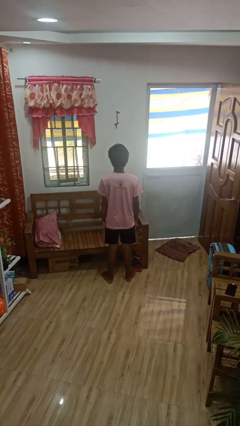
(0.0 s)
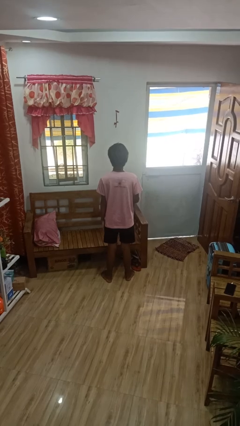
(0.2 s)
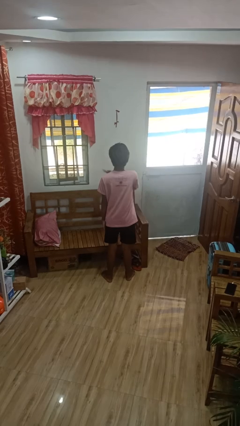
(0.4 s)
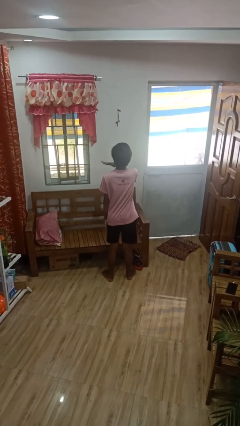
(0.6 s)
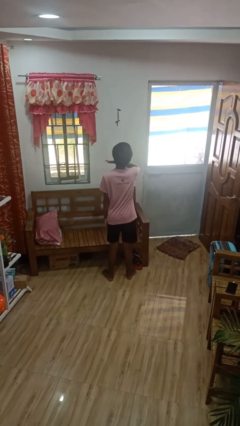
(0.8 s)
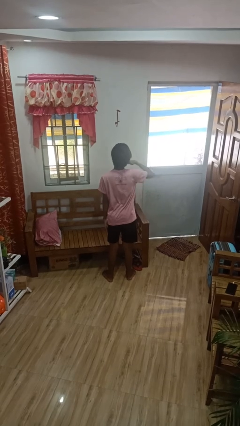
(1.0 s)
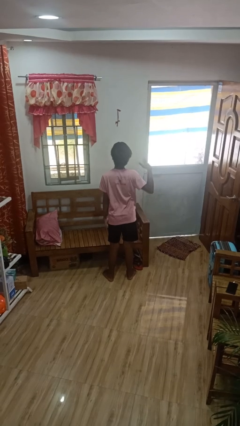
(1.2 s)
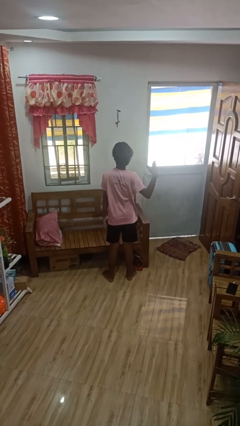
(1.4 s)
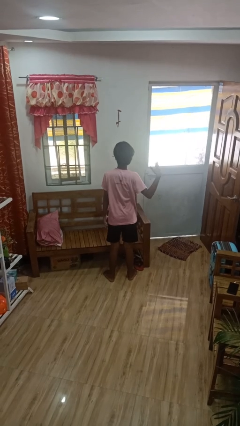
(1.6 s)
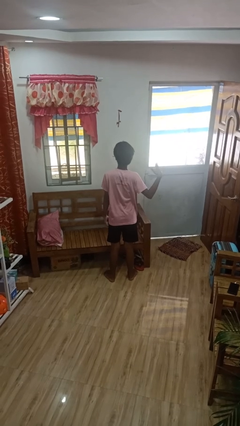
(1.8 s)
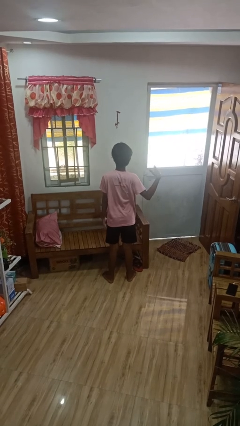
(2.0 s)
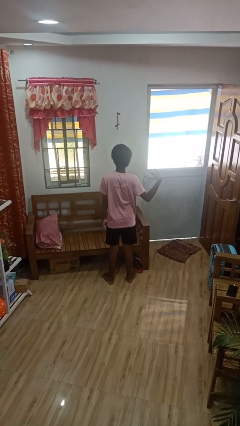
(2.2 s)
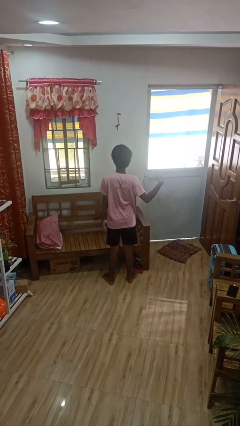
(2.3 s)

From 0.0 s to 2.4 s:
person gestures cut

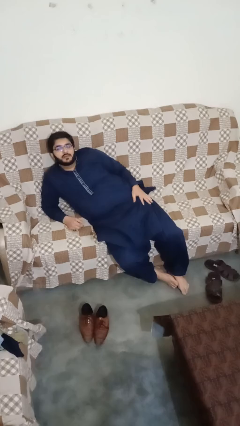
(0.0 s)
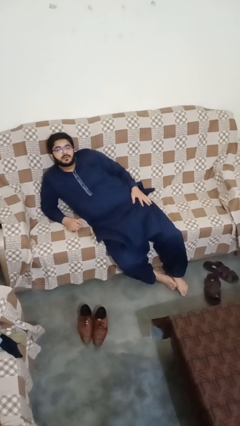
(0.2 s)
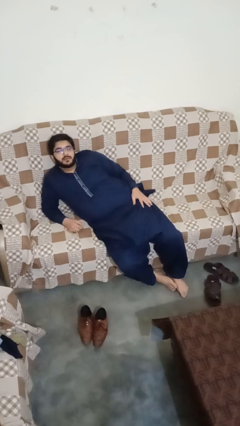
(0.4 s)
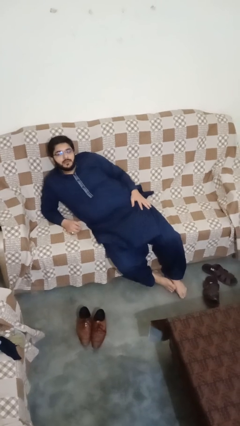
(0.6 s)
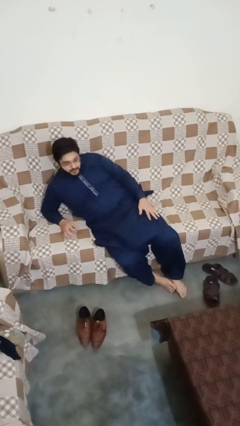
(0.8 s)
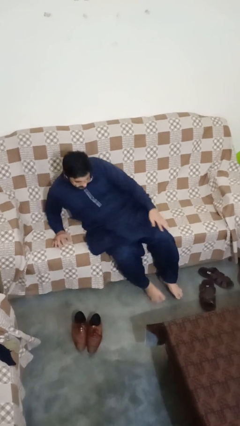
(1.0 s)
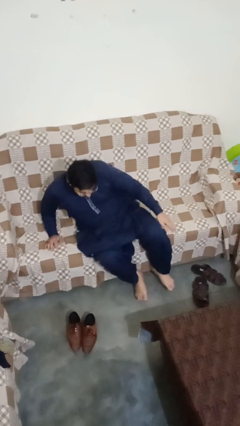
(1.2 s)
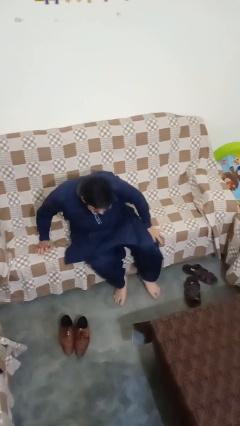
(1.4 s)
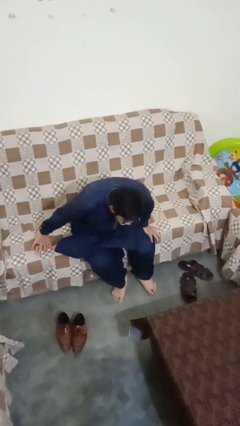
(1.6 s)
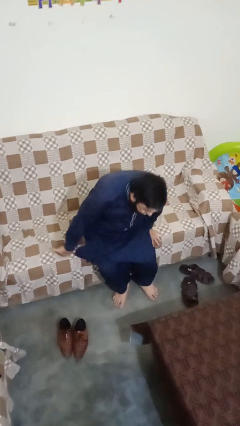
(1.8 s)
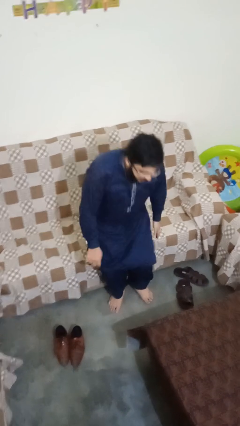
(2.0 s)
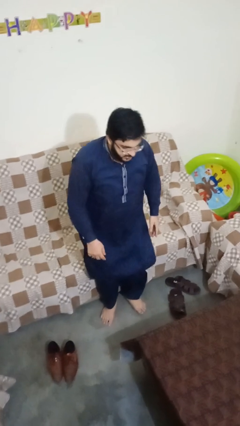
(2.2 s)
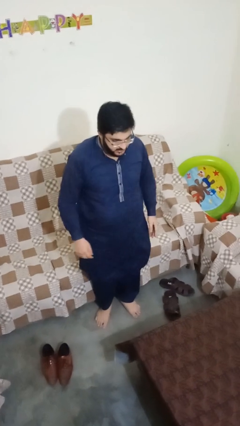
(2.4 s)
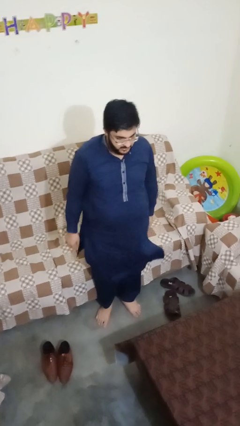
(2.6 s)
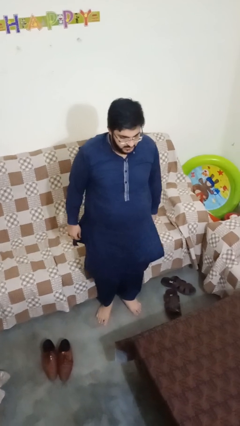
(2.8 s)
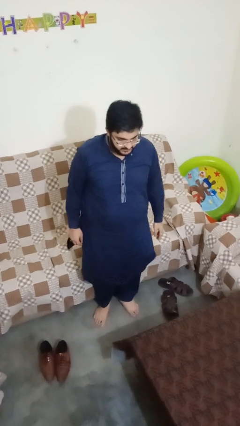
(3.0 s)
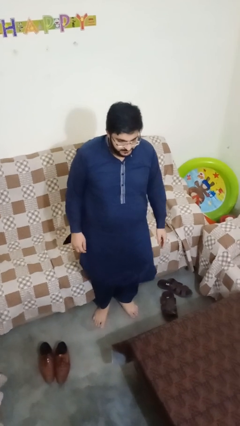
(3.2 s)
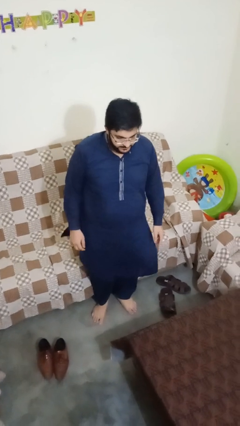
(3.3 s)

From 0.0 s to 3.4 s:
person stands up

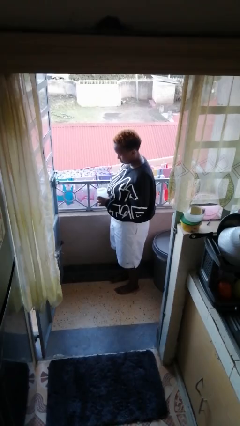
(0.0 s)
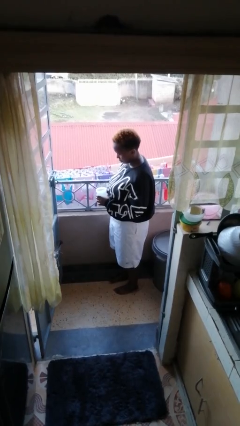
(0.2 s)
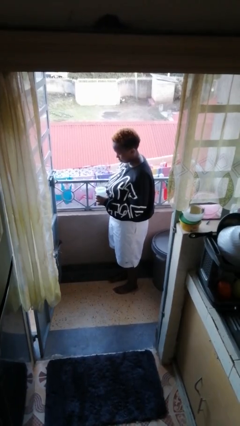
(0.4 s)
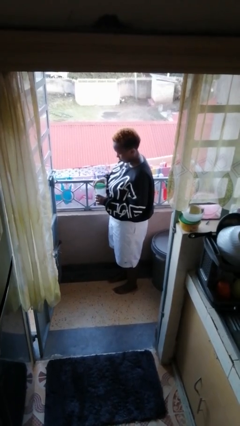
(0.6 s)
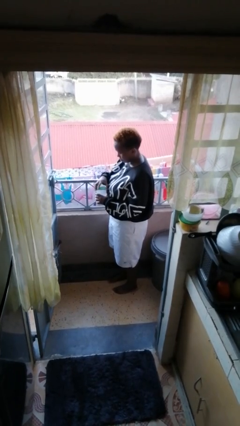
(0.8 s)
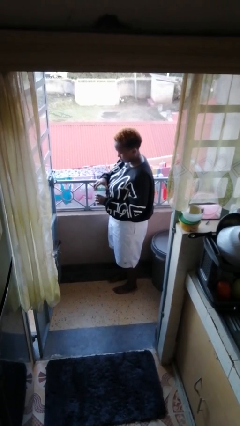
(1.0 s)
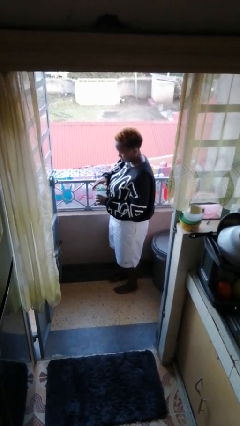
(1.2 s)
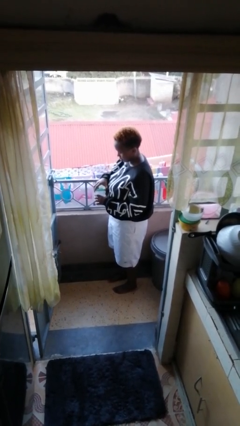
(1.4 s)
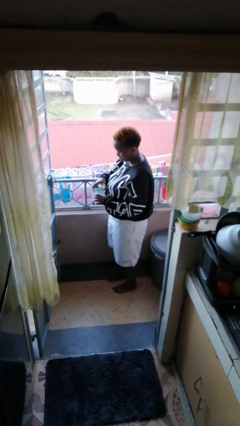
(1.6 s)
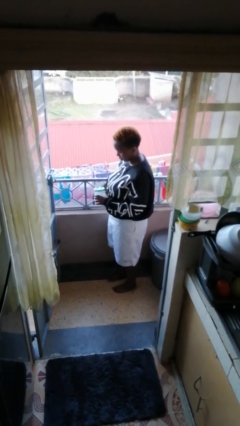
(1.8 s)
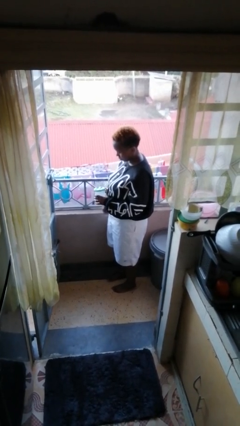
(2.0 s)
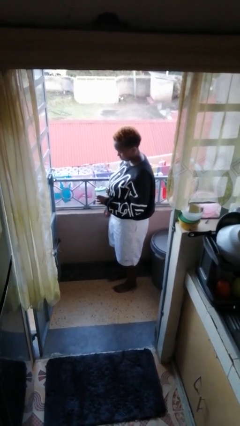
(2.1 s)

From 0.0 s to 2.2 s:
person closes jar

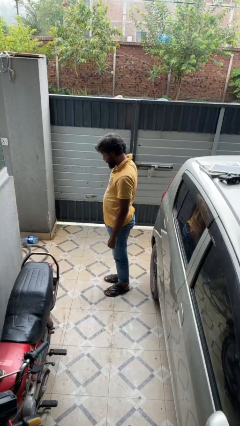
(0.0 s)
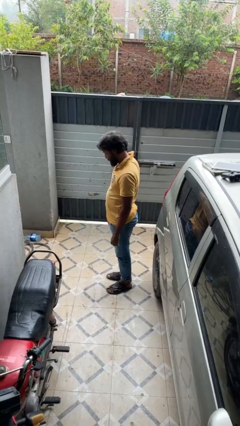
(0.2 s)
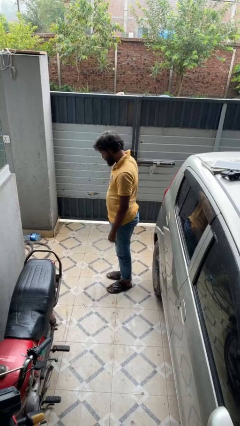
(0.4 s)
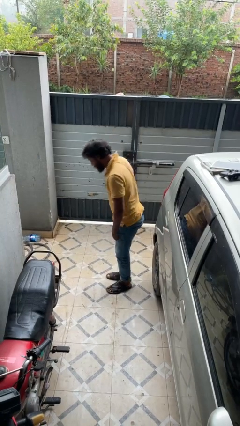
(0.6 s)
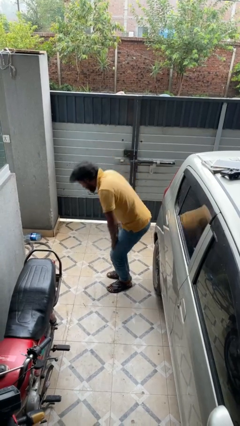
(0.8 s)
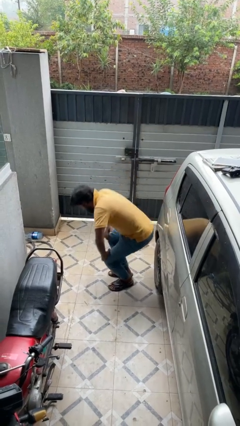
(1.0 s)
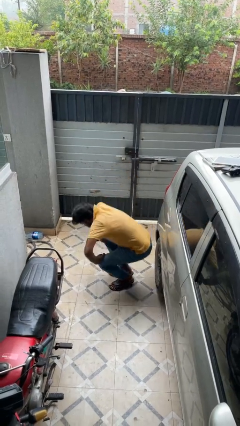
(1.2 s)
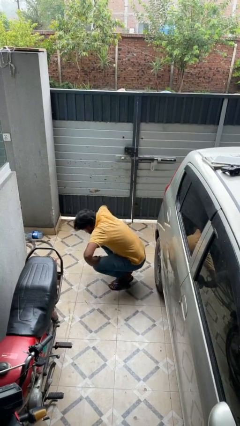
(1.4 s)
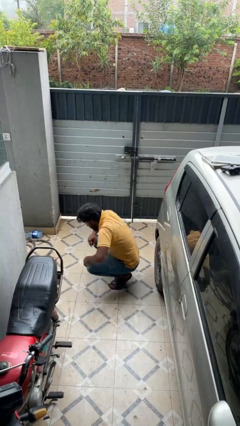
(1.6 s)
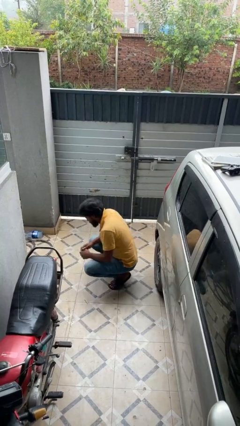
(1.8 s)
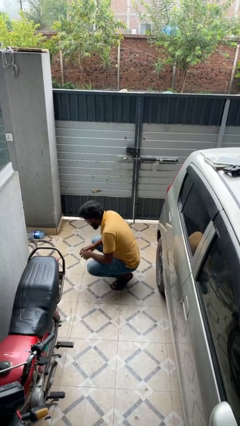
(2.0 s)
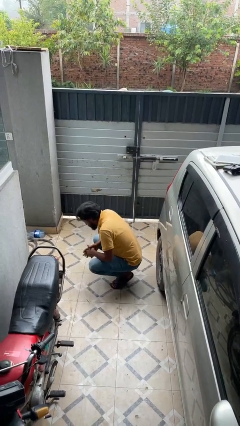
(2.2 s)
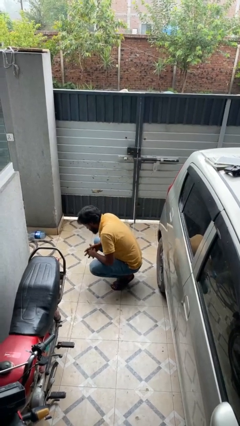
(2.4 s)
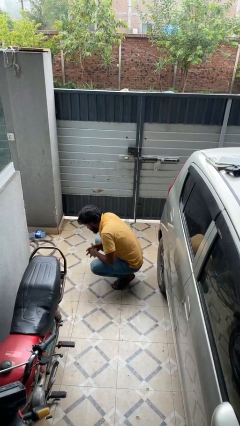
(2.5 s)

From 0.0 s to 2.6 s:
person squats

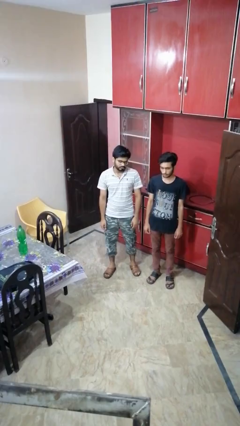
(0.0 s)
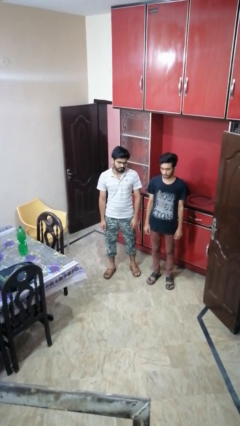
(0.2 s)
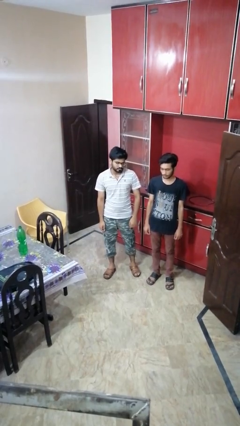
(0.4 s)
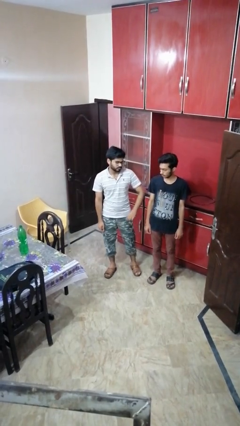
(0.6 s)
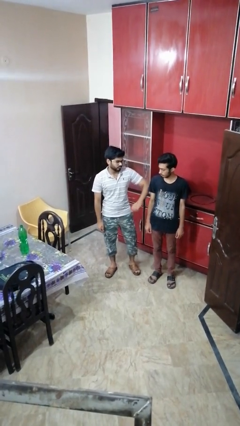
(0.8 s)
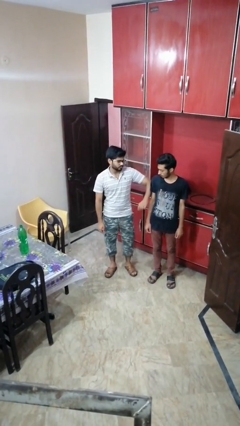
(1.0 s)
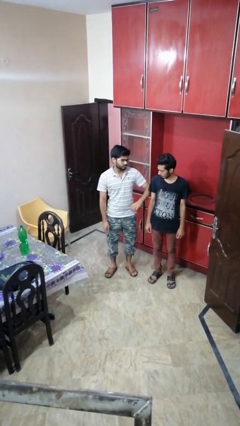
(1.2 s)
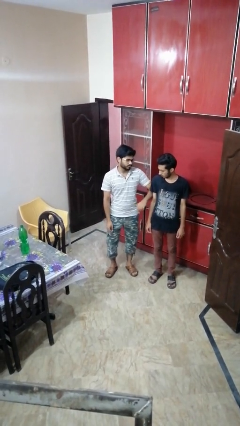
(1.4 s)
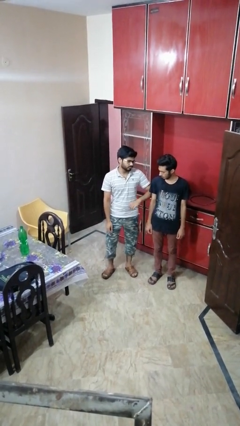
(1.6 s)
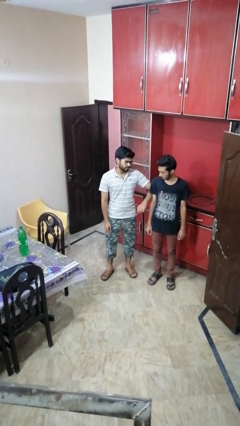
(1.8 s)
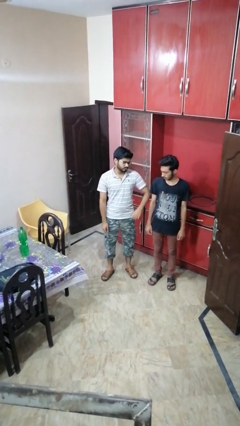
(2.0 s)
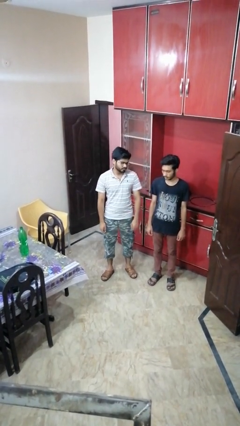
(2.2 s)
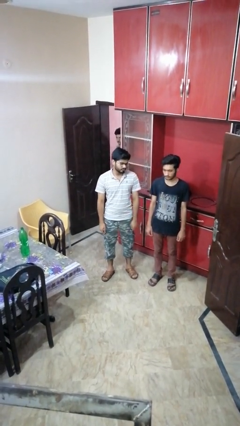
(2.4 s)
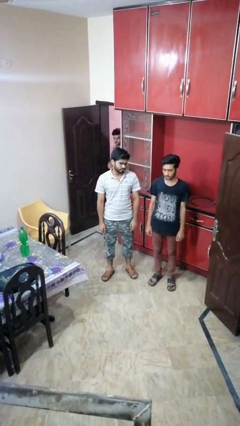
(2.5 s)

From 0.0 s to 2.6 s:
person nudges person with elbow

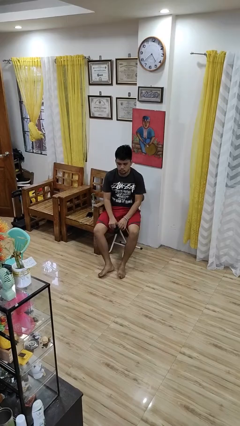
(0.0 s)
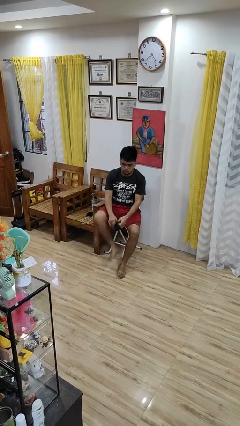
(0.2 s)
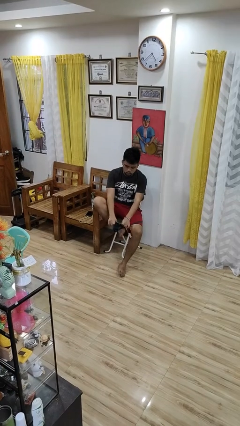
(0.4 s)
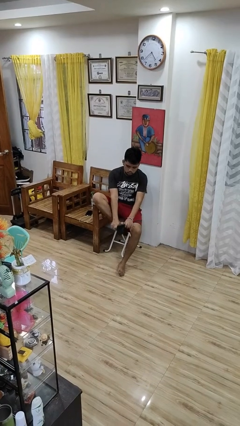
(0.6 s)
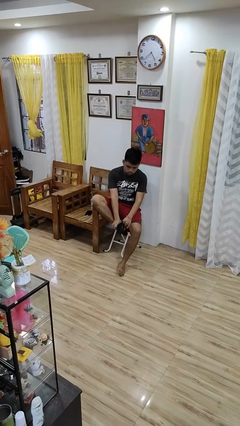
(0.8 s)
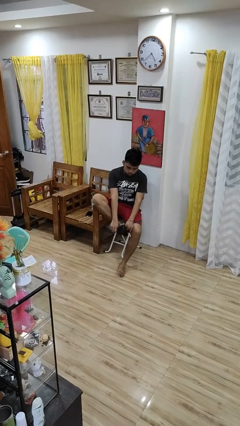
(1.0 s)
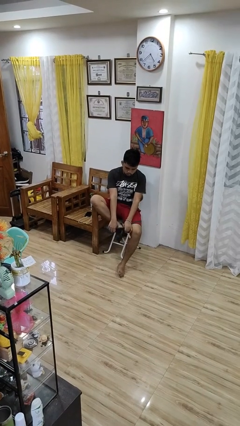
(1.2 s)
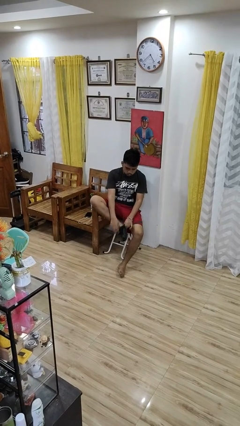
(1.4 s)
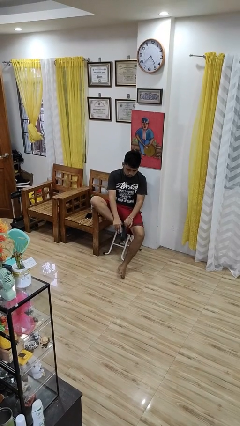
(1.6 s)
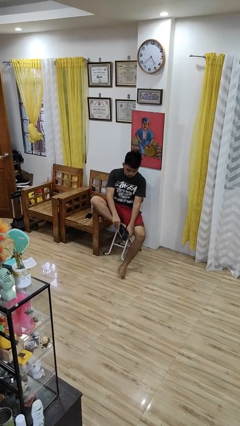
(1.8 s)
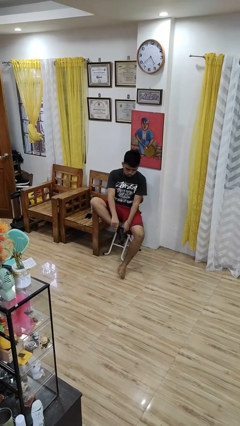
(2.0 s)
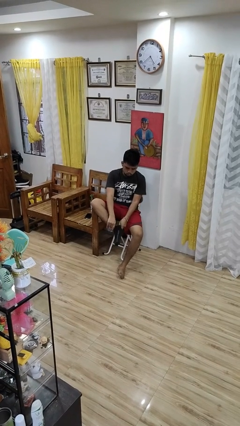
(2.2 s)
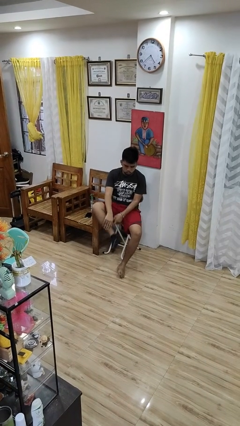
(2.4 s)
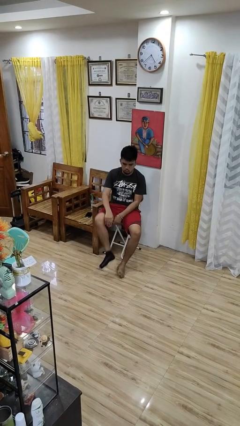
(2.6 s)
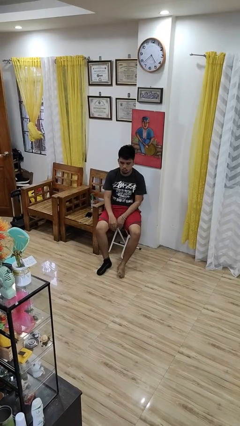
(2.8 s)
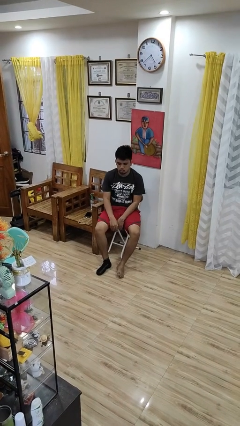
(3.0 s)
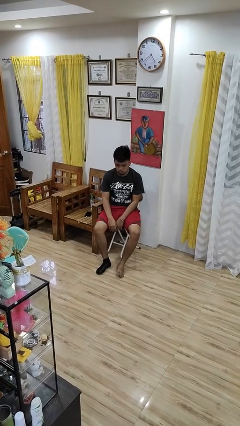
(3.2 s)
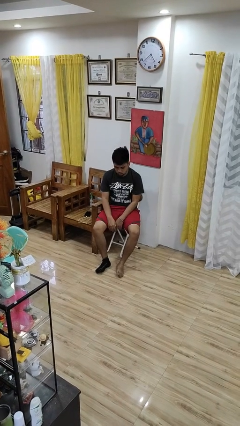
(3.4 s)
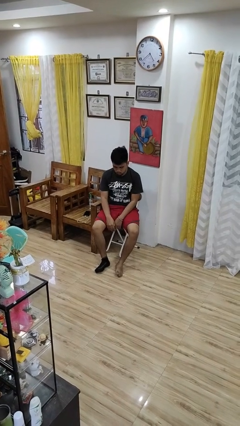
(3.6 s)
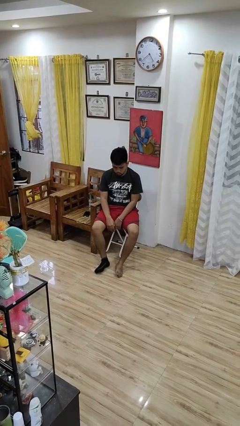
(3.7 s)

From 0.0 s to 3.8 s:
person puts on socks
